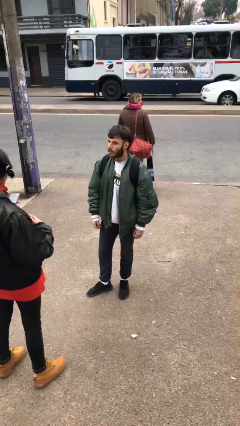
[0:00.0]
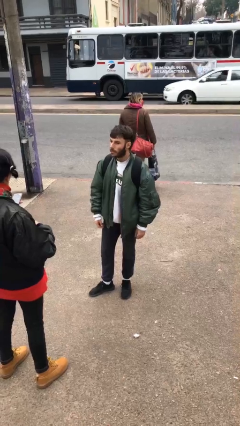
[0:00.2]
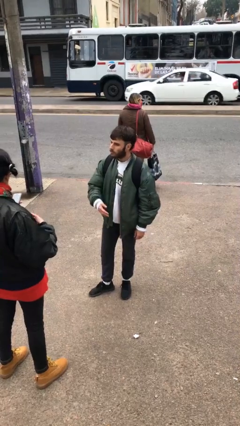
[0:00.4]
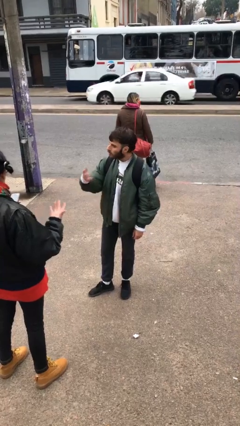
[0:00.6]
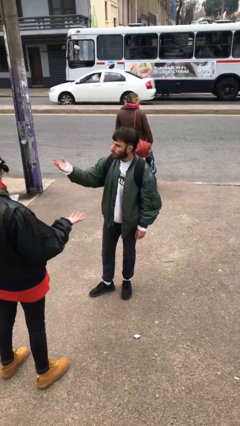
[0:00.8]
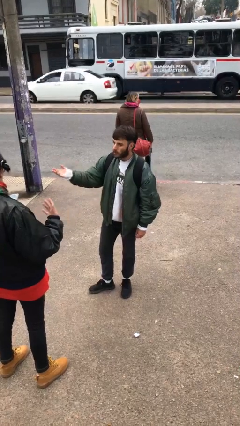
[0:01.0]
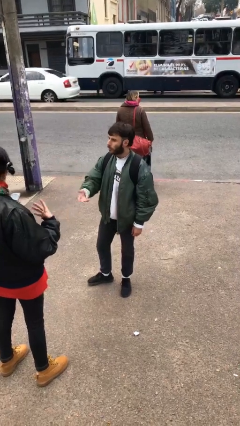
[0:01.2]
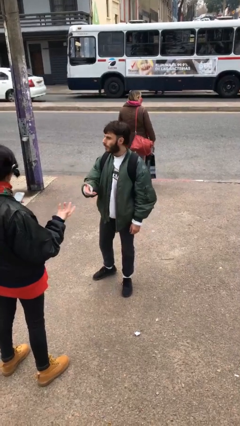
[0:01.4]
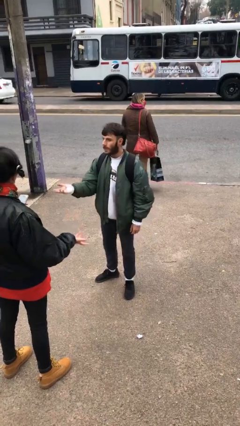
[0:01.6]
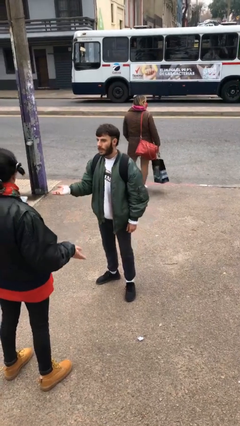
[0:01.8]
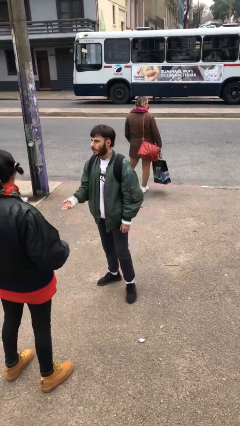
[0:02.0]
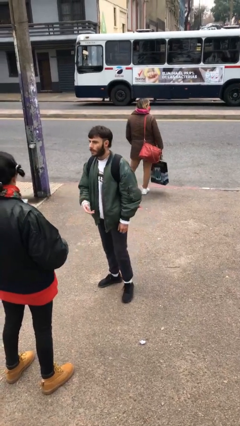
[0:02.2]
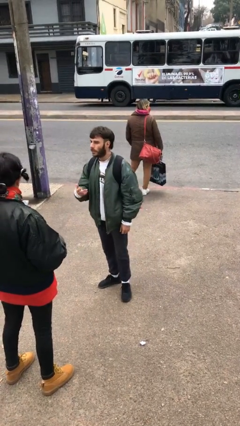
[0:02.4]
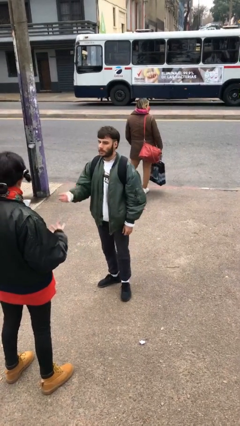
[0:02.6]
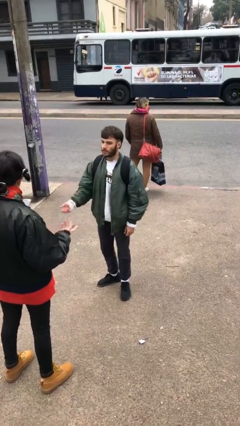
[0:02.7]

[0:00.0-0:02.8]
person talks to person

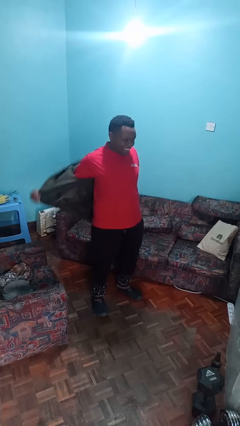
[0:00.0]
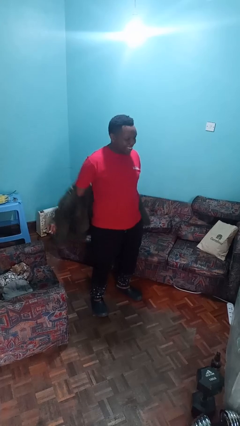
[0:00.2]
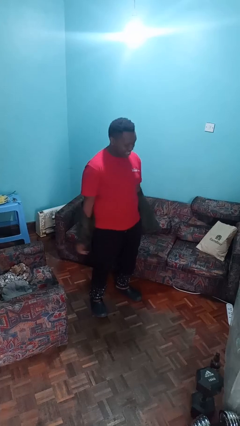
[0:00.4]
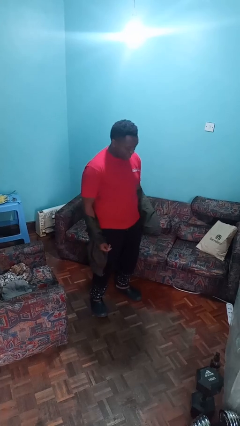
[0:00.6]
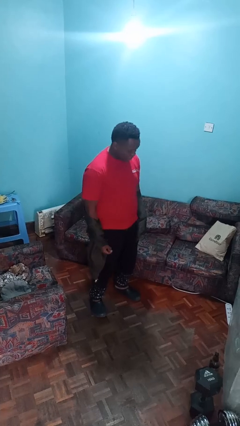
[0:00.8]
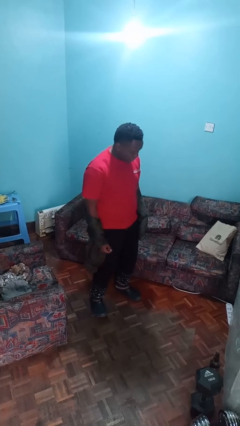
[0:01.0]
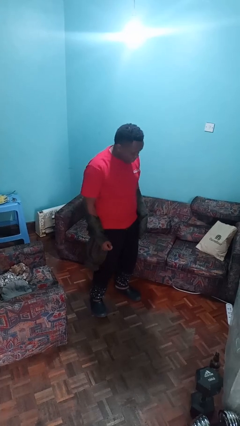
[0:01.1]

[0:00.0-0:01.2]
person takes off jacket

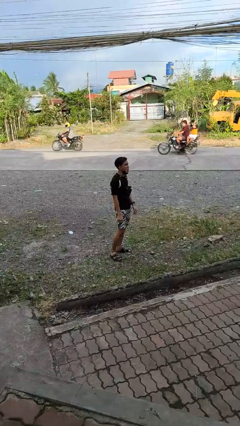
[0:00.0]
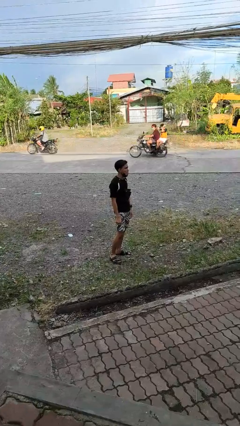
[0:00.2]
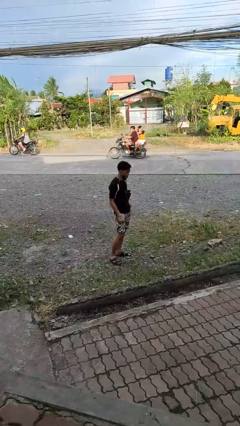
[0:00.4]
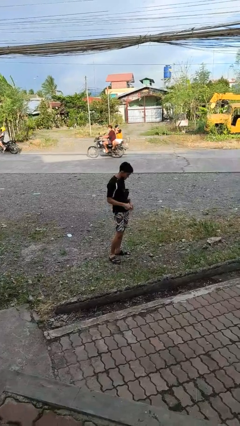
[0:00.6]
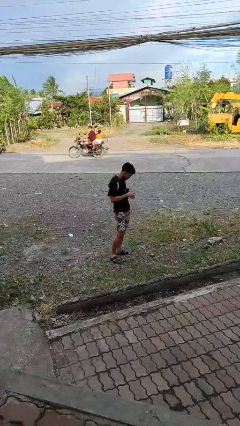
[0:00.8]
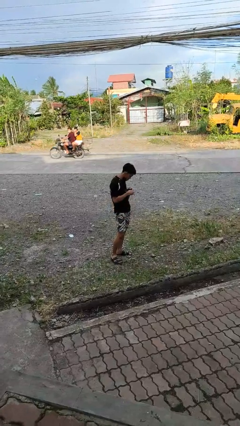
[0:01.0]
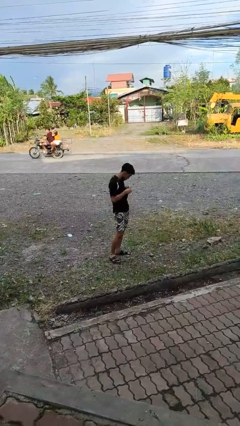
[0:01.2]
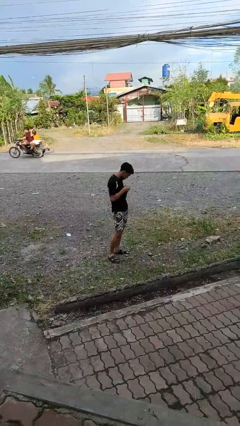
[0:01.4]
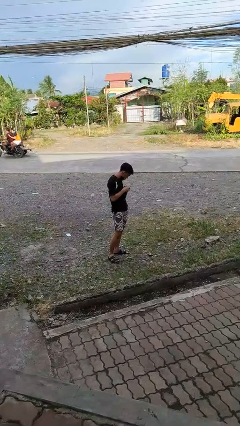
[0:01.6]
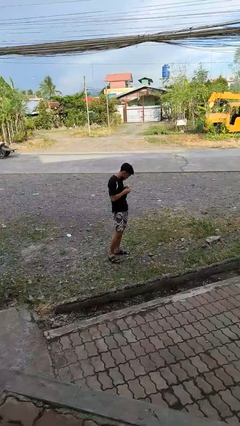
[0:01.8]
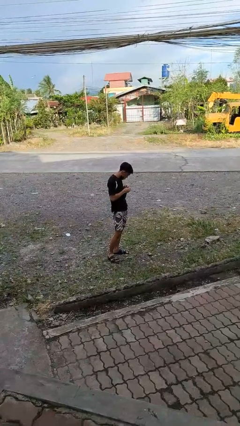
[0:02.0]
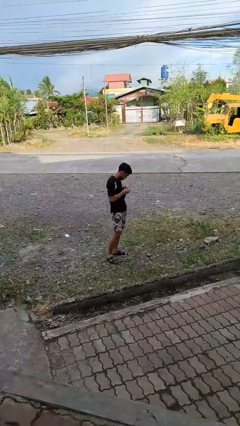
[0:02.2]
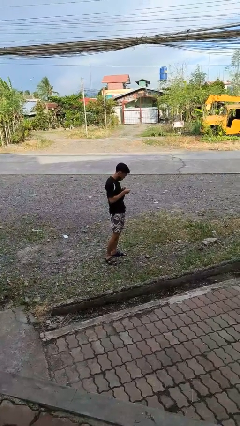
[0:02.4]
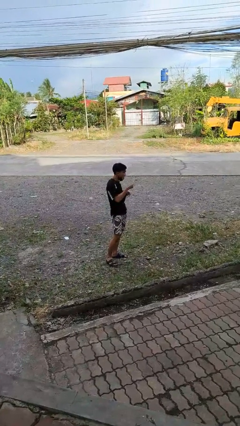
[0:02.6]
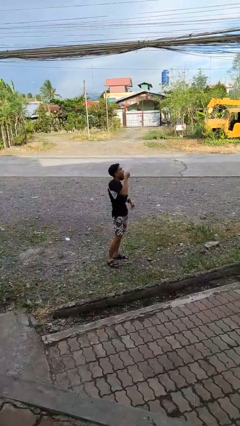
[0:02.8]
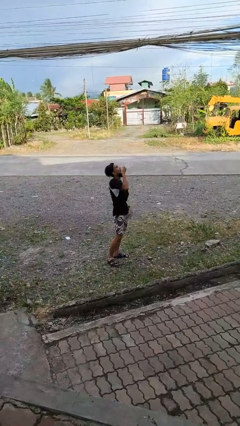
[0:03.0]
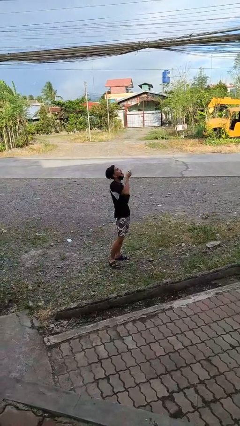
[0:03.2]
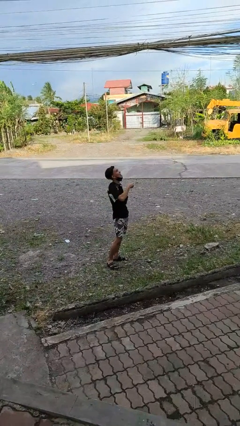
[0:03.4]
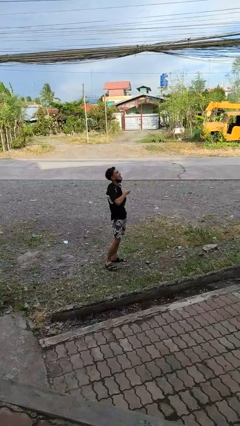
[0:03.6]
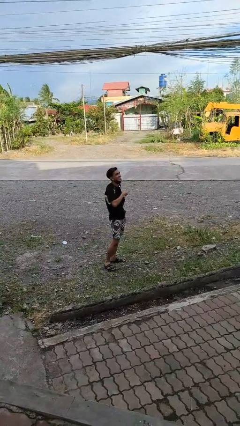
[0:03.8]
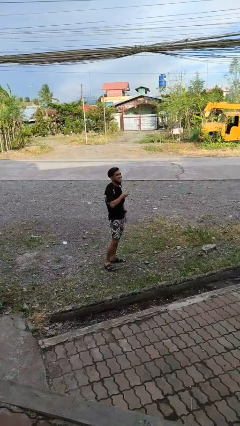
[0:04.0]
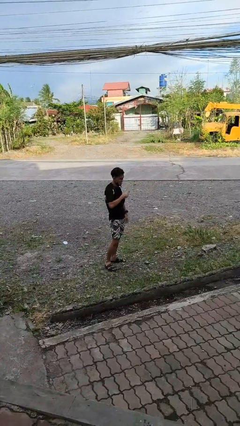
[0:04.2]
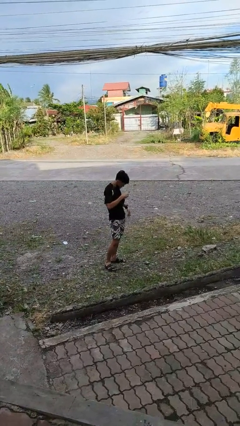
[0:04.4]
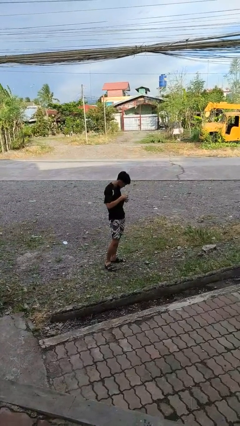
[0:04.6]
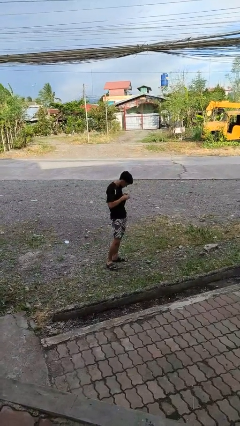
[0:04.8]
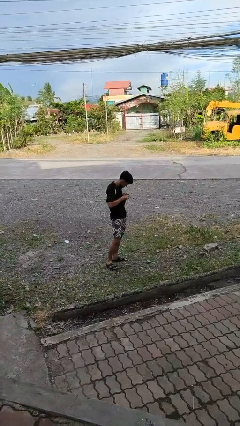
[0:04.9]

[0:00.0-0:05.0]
person eats snack from bag

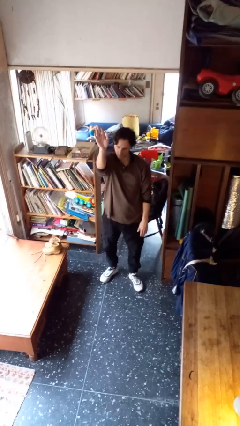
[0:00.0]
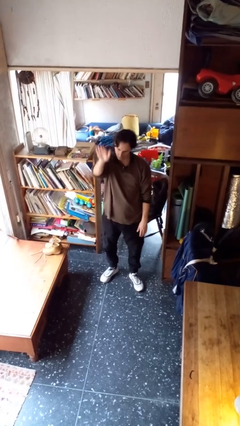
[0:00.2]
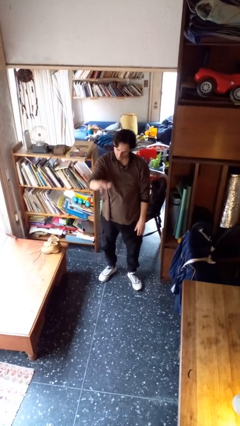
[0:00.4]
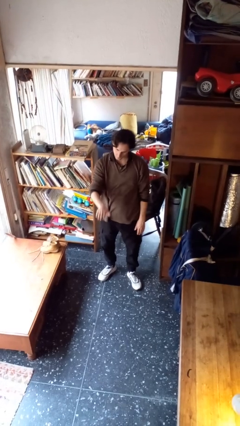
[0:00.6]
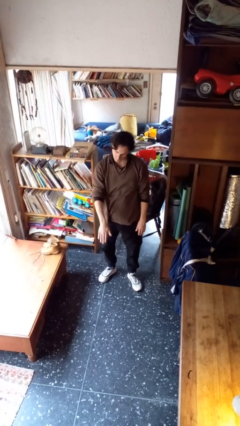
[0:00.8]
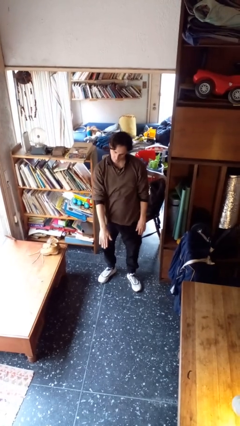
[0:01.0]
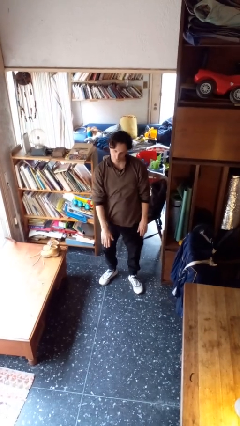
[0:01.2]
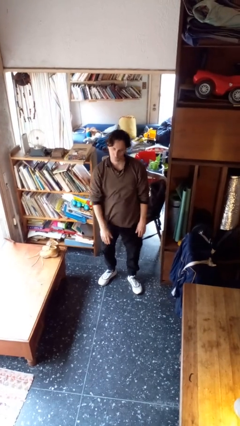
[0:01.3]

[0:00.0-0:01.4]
person gestures swipe down

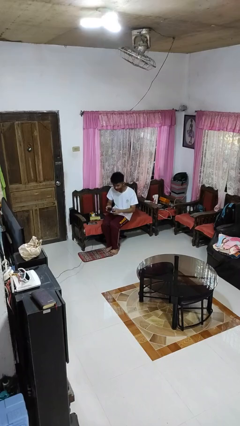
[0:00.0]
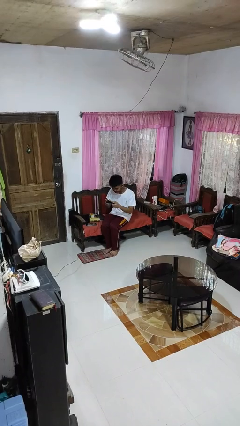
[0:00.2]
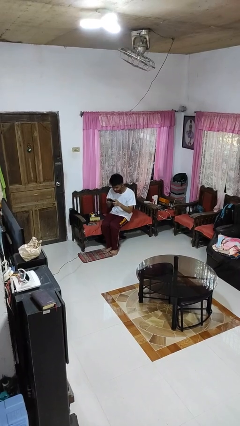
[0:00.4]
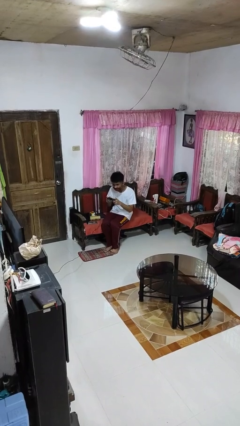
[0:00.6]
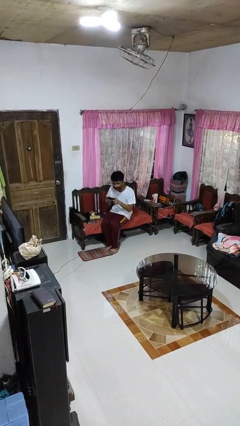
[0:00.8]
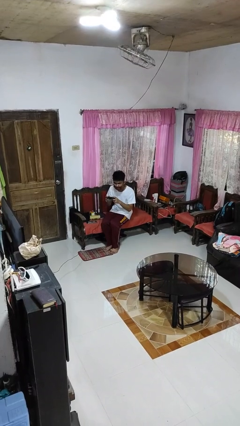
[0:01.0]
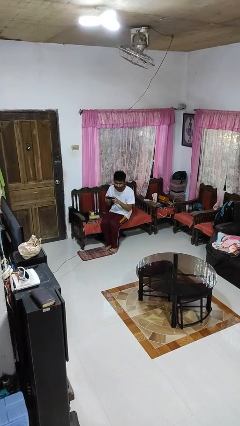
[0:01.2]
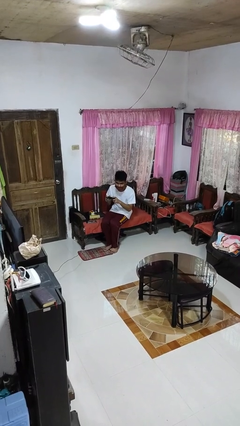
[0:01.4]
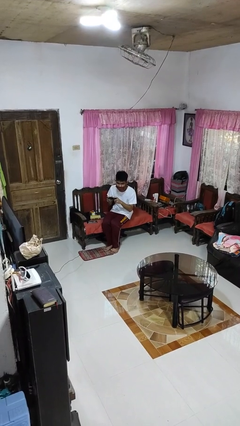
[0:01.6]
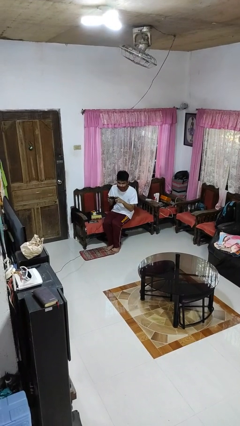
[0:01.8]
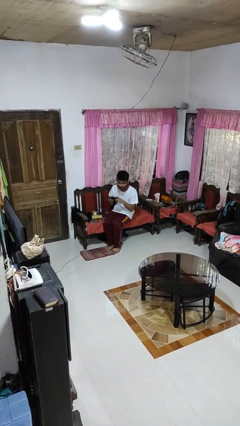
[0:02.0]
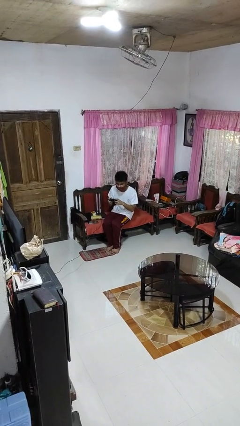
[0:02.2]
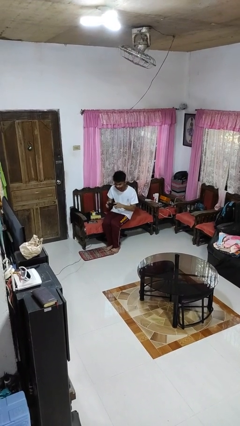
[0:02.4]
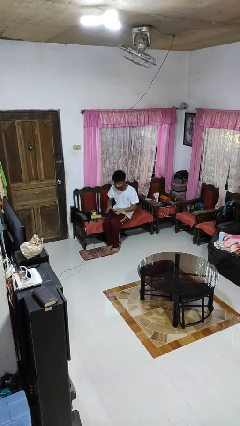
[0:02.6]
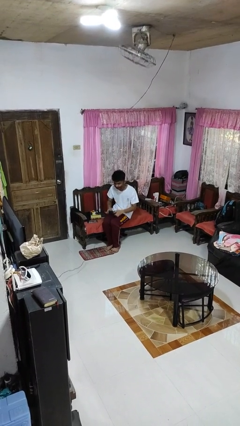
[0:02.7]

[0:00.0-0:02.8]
person interacts with handheld game

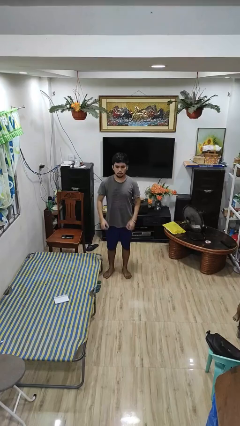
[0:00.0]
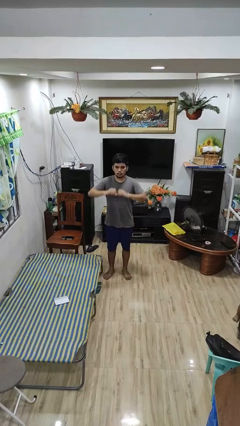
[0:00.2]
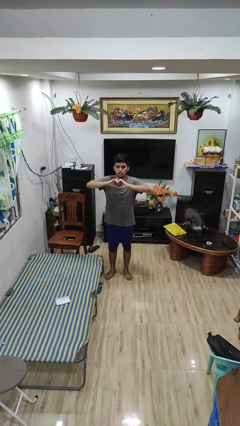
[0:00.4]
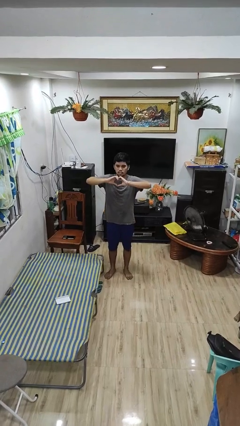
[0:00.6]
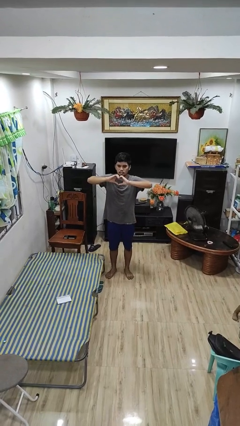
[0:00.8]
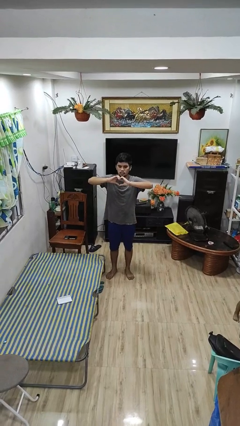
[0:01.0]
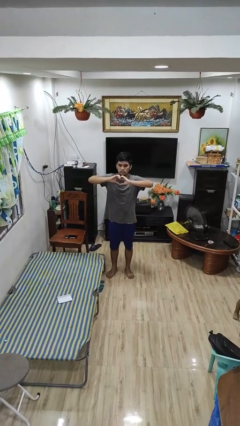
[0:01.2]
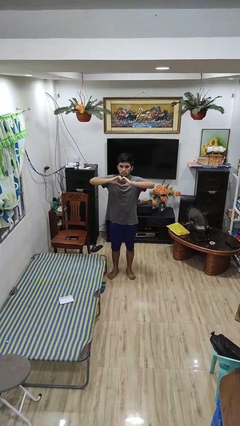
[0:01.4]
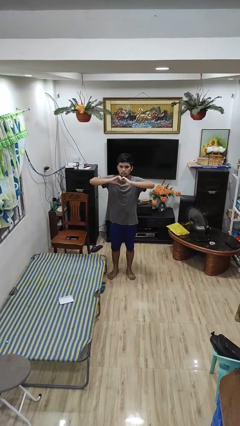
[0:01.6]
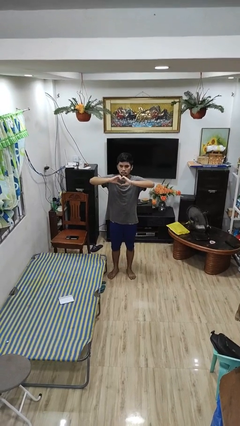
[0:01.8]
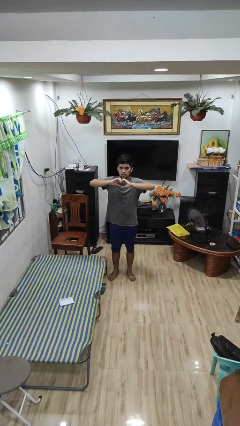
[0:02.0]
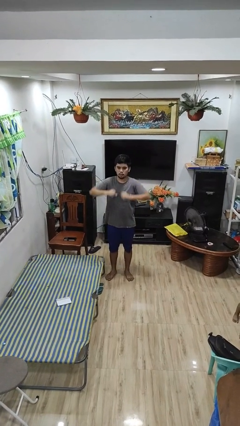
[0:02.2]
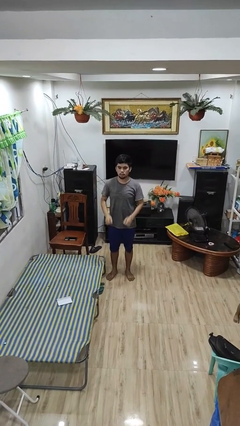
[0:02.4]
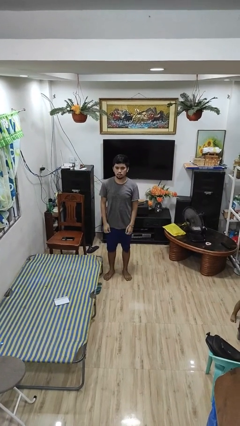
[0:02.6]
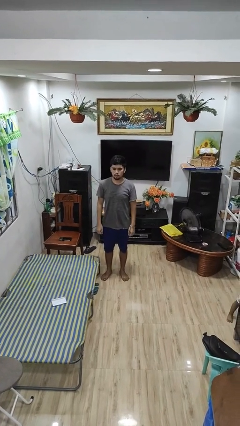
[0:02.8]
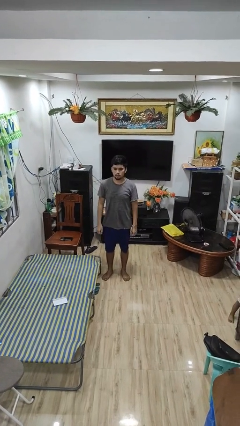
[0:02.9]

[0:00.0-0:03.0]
person gestures heart

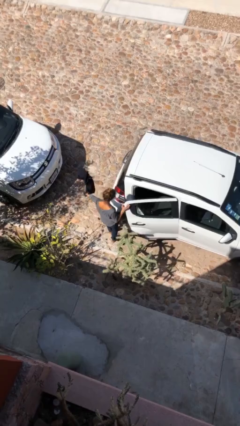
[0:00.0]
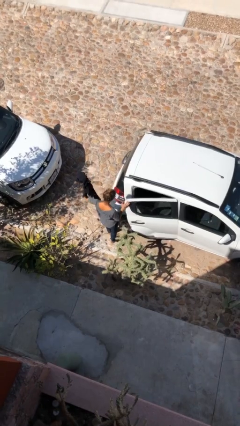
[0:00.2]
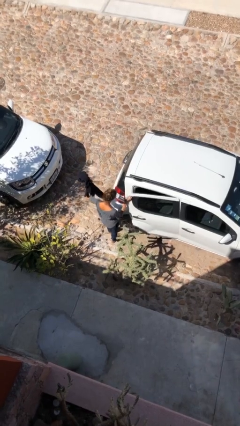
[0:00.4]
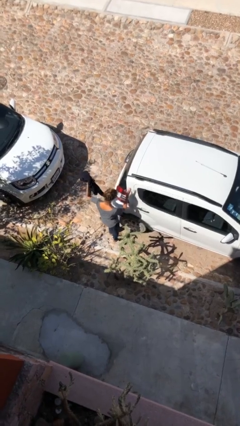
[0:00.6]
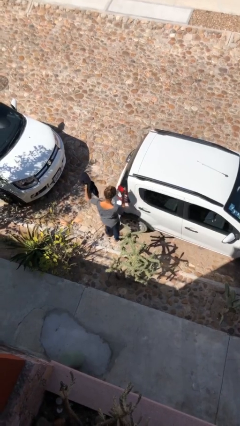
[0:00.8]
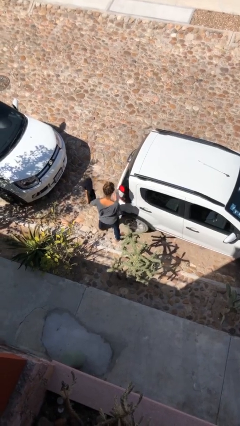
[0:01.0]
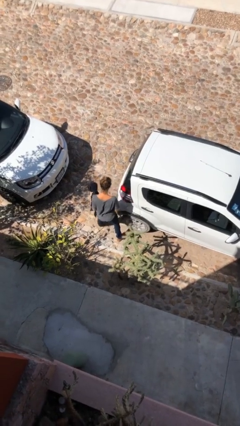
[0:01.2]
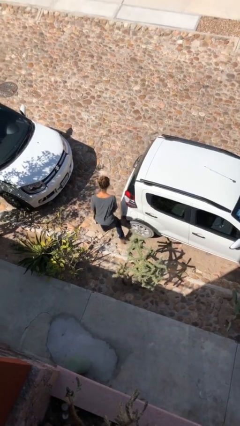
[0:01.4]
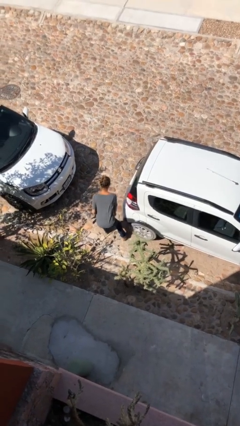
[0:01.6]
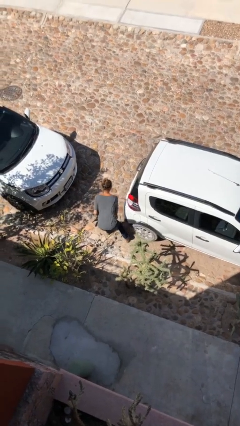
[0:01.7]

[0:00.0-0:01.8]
person closes car door
